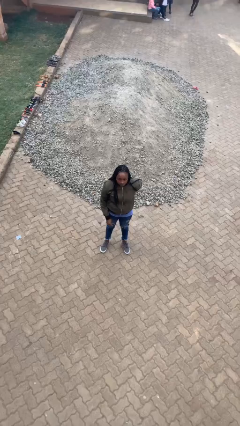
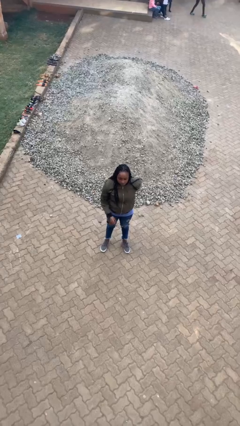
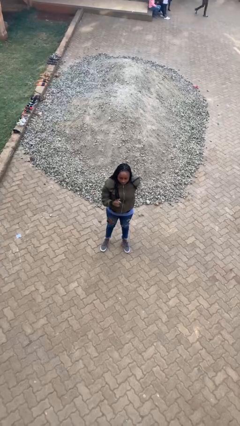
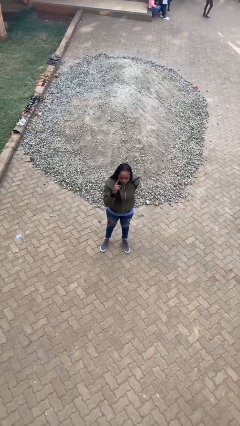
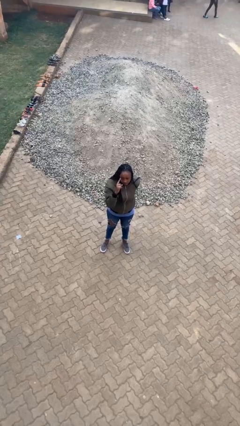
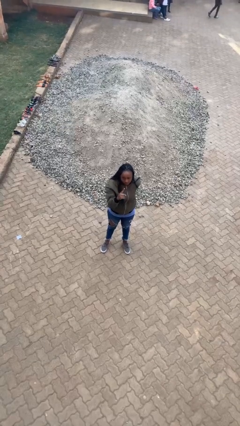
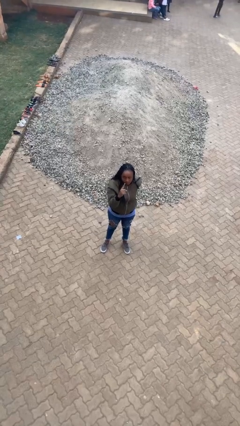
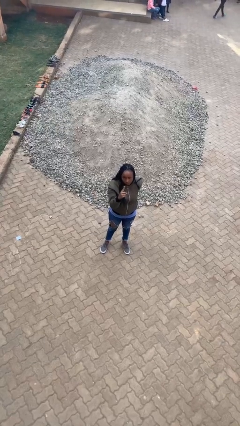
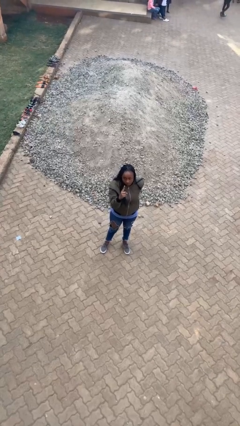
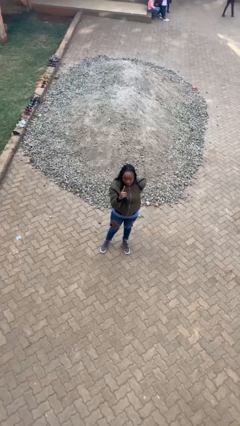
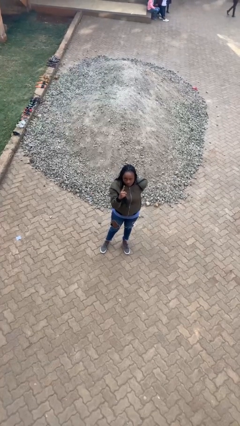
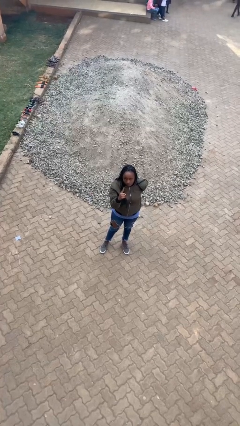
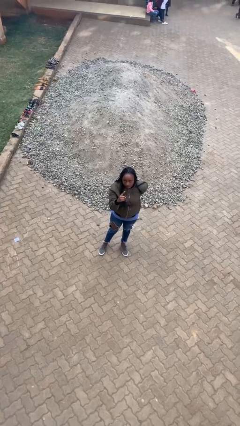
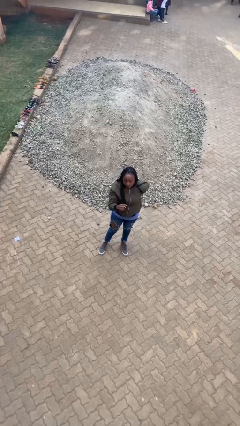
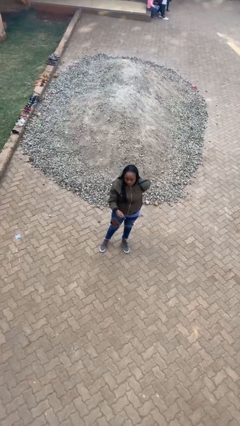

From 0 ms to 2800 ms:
person gestures number one

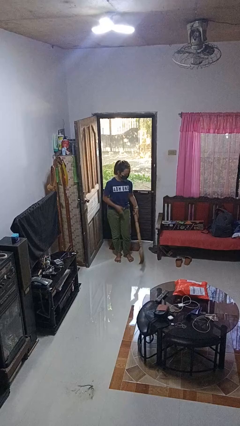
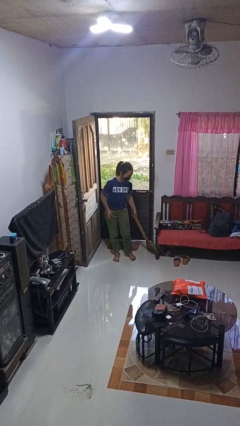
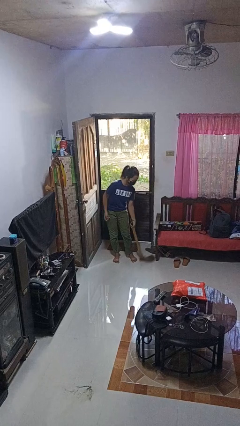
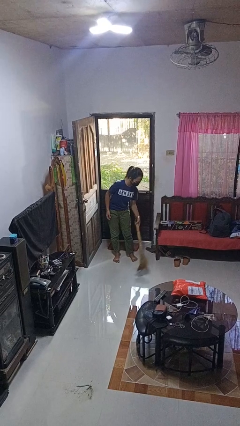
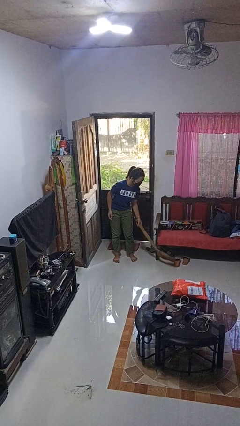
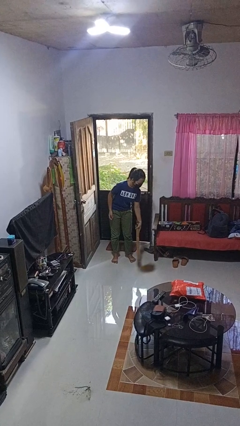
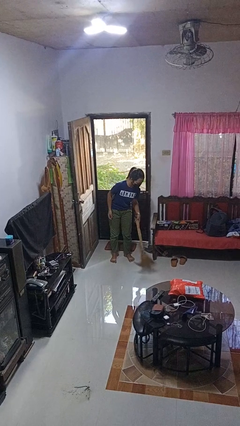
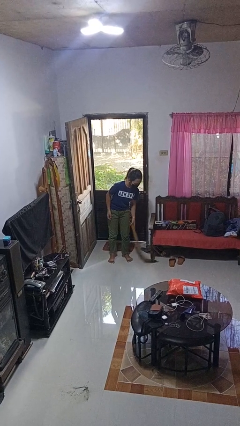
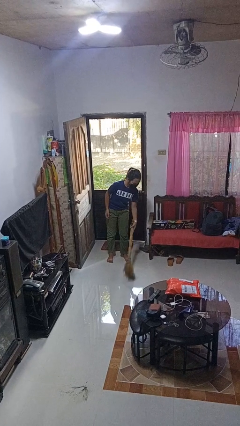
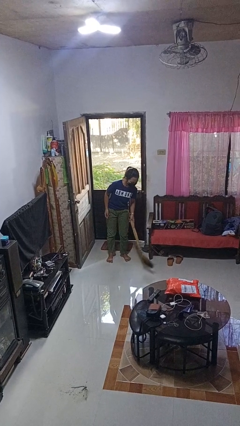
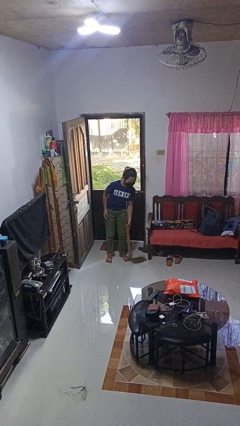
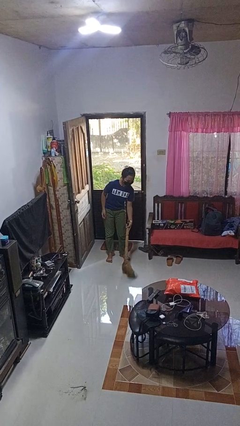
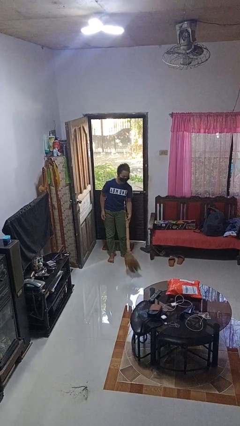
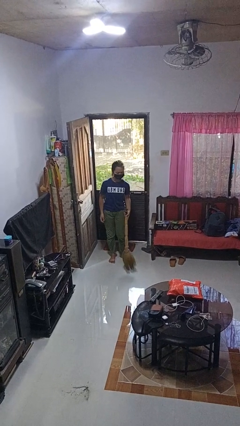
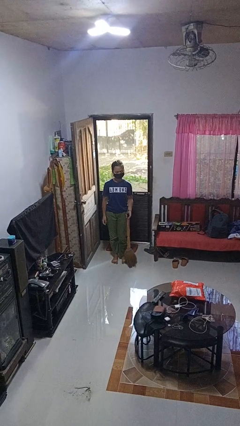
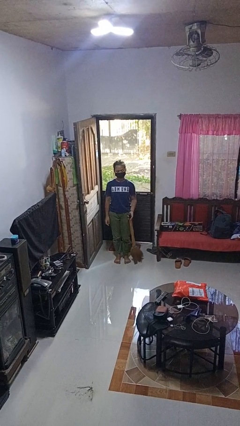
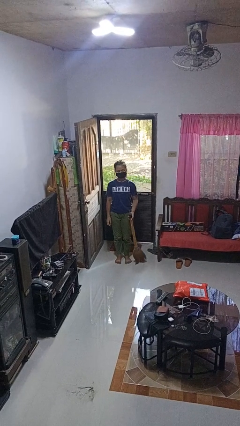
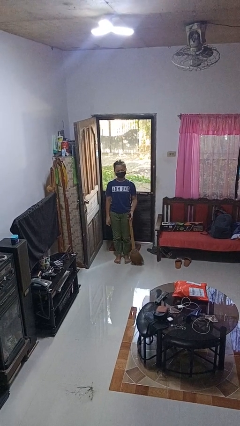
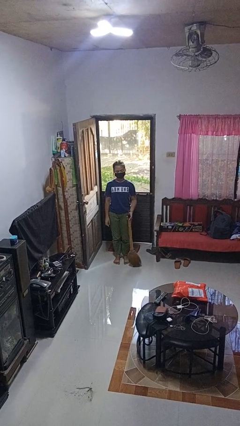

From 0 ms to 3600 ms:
person sweeps floor

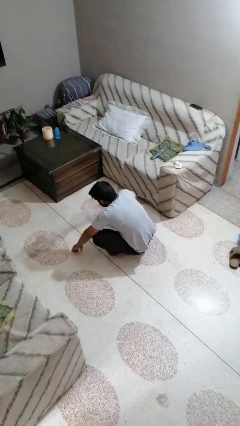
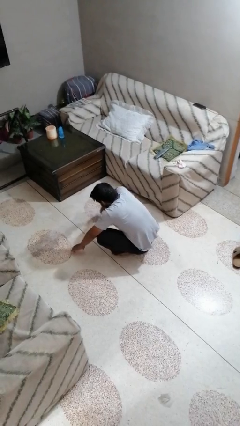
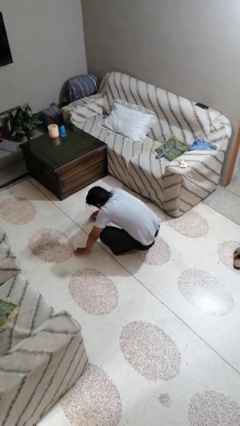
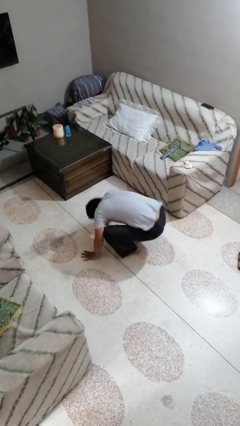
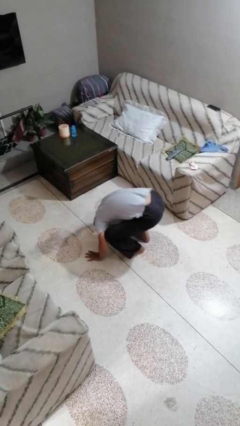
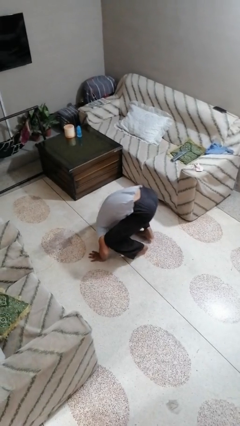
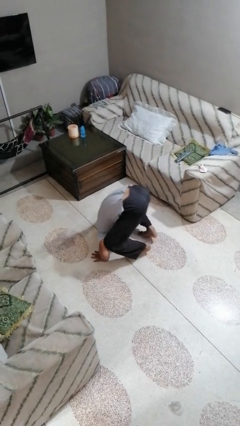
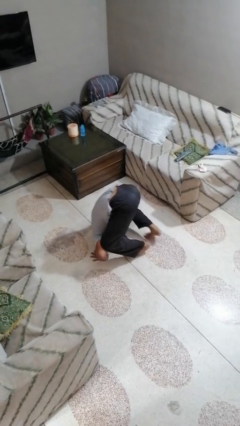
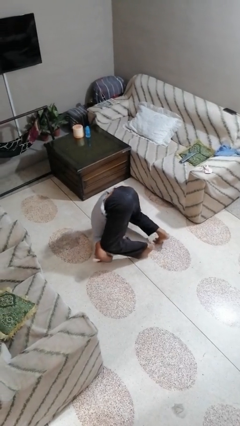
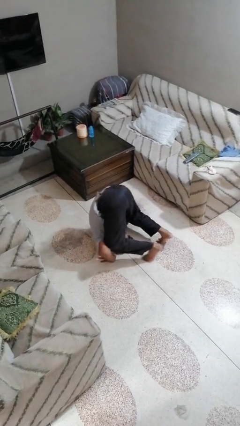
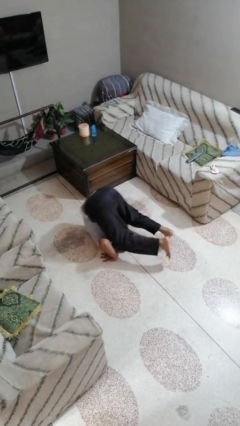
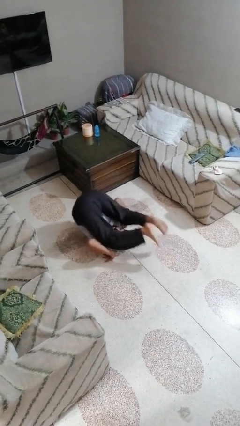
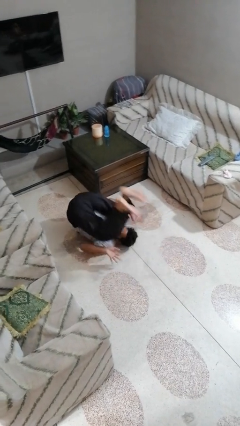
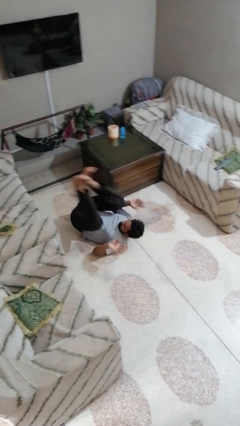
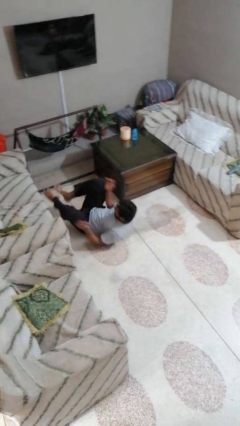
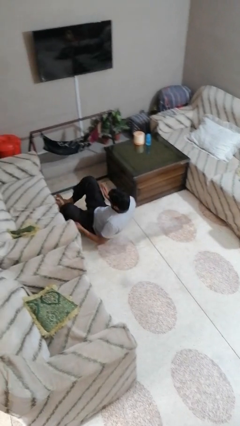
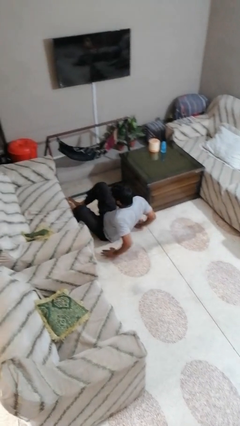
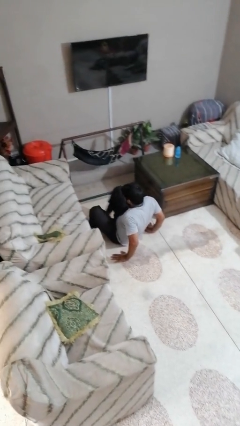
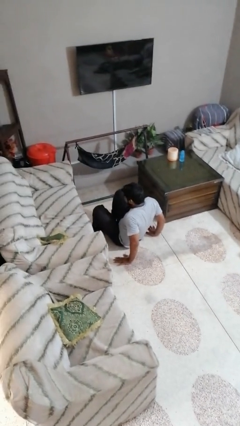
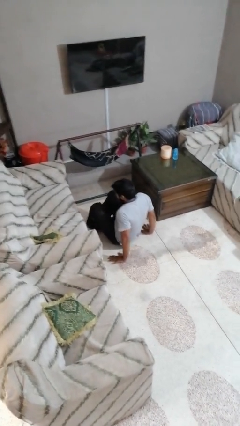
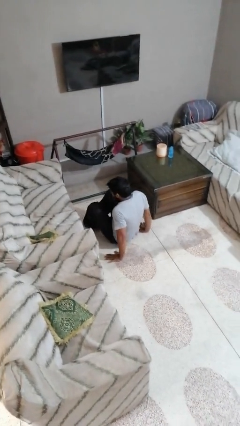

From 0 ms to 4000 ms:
person somersaults

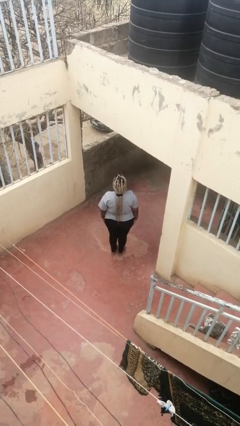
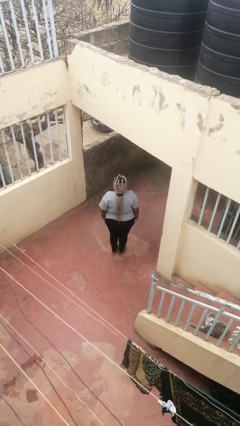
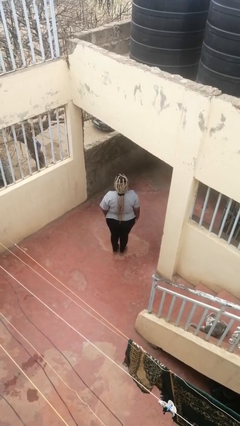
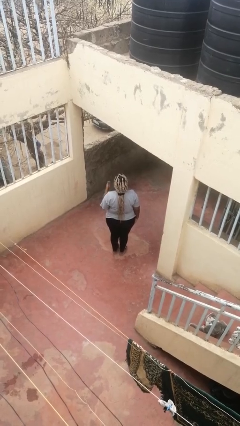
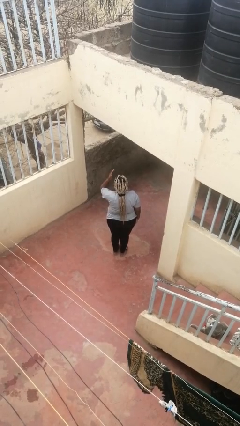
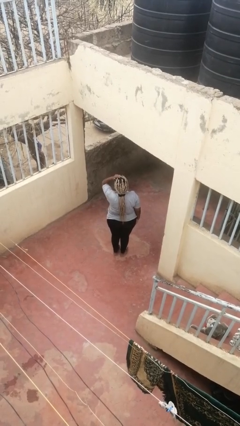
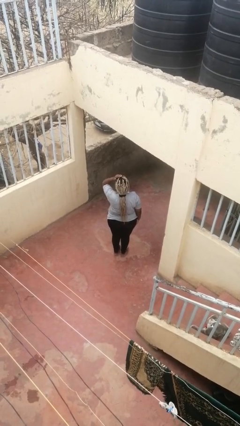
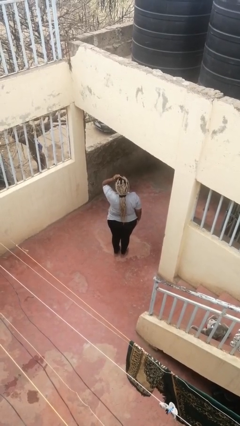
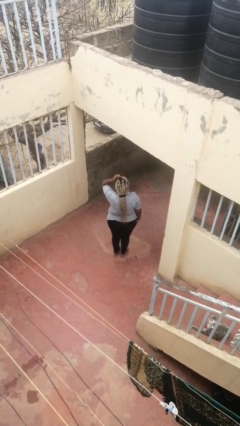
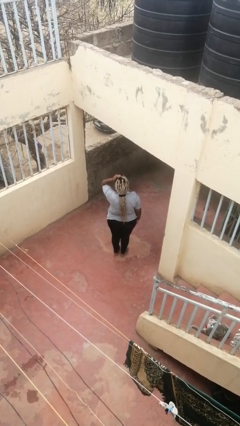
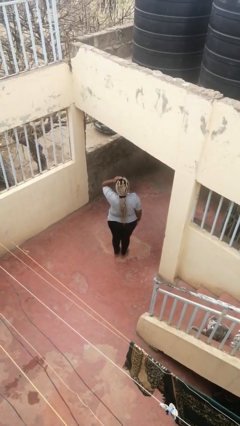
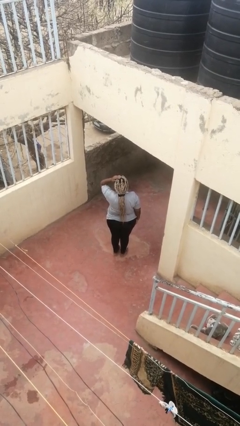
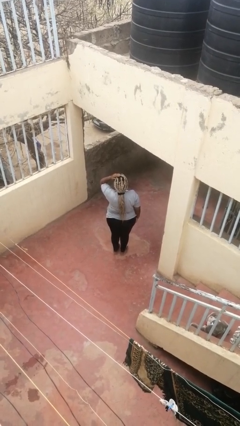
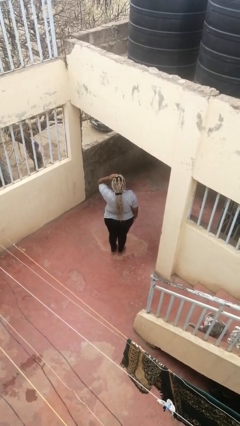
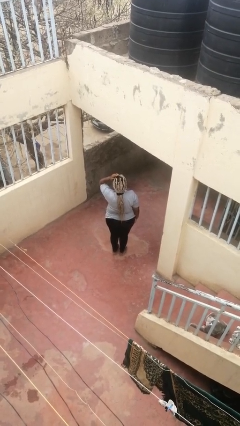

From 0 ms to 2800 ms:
person pats head

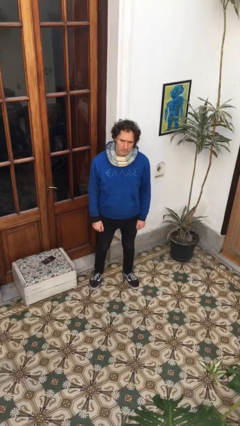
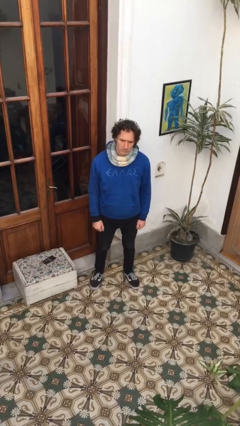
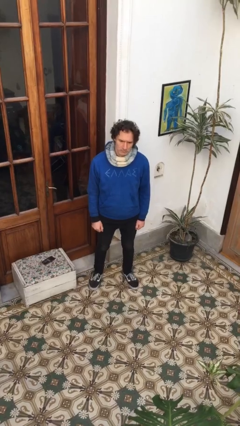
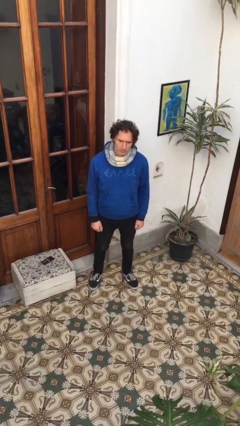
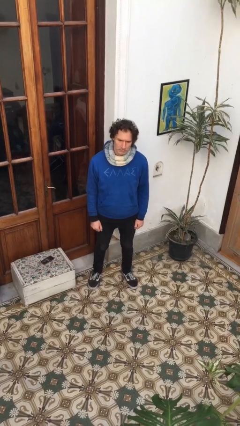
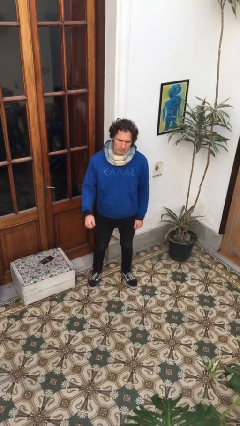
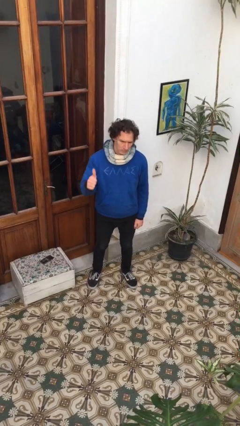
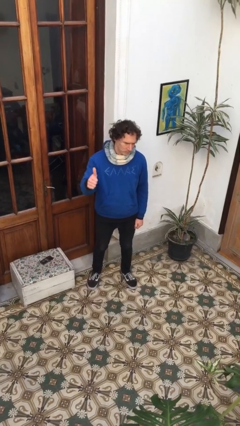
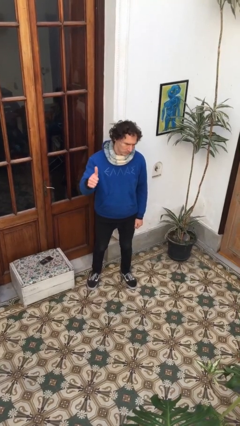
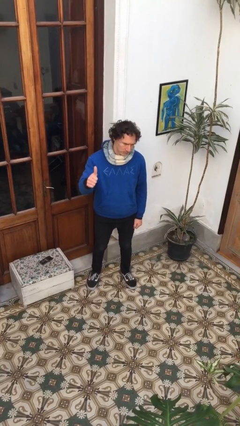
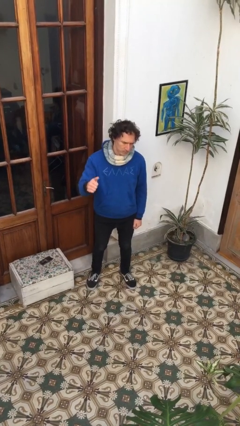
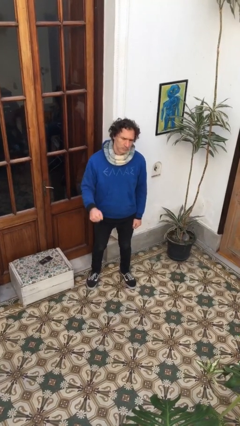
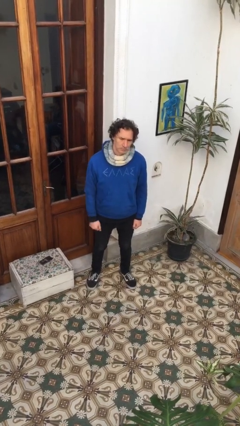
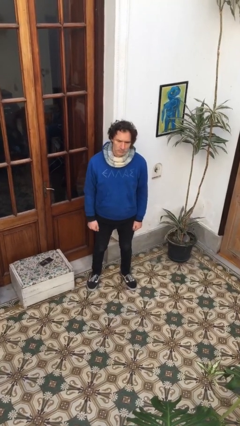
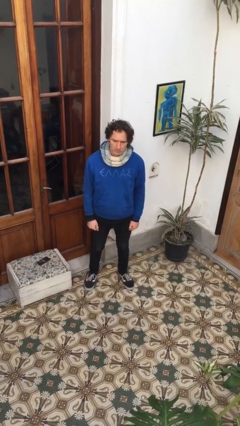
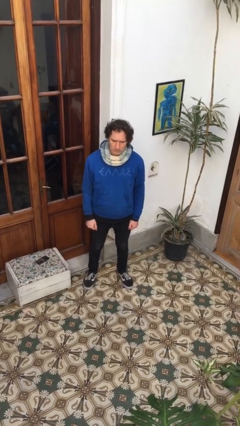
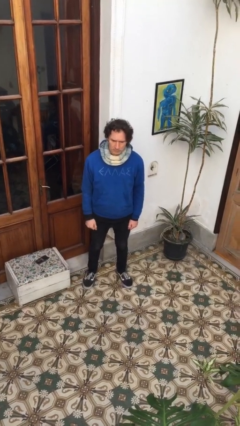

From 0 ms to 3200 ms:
person gestures thumbs up

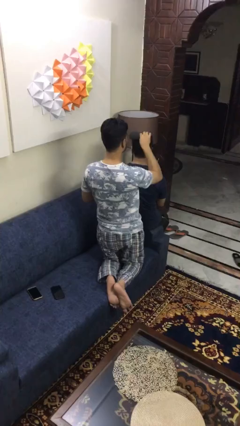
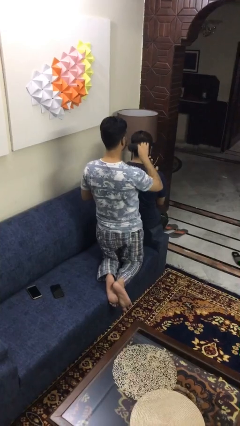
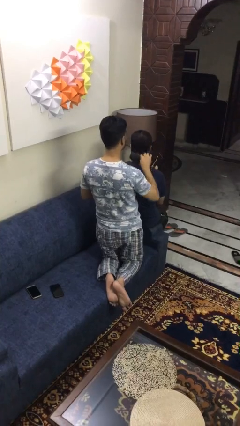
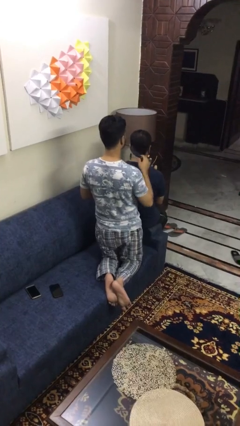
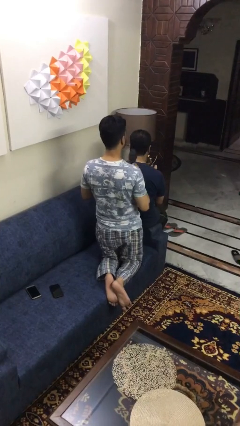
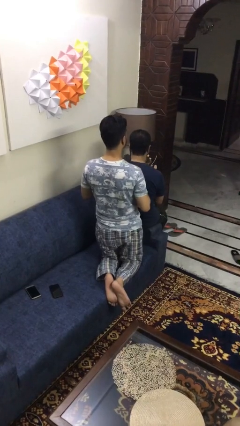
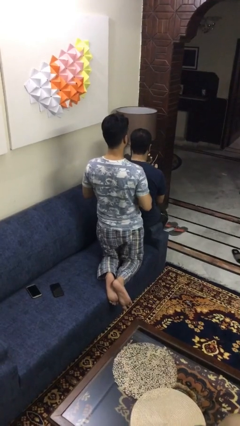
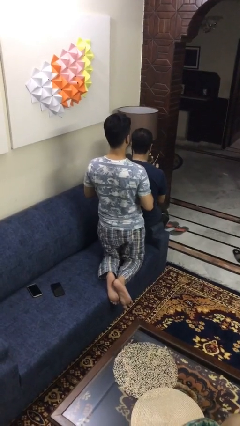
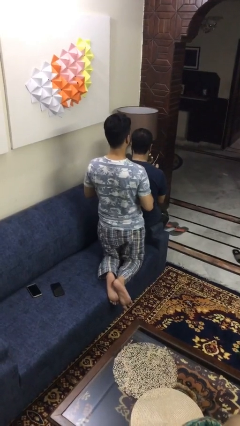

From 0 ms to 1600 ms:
person brushes hair of person
